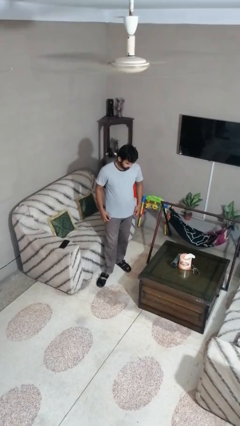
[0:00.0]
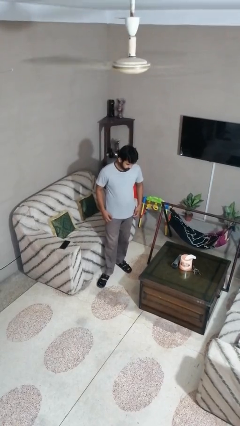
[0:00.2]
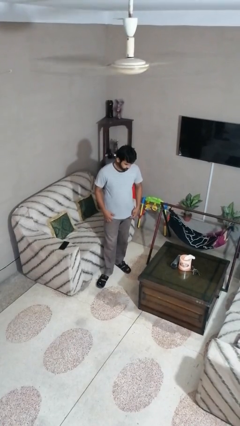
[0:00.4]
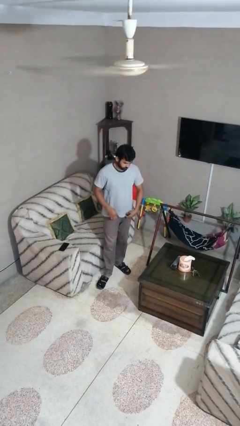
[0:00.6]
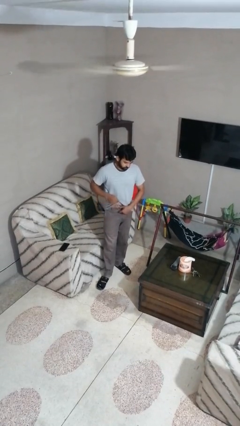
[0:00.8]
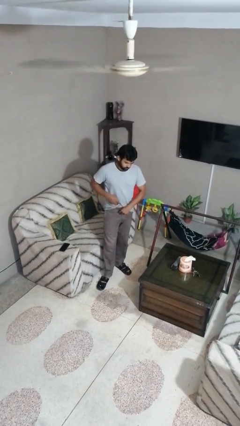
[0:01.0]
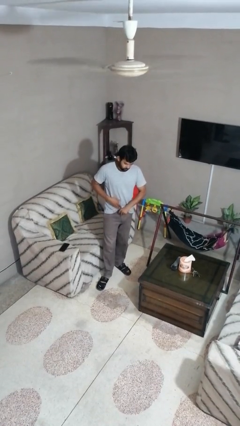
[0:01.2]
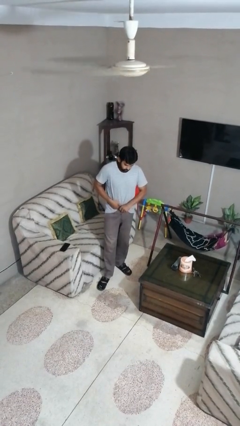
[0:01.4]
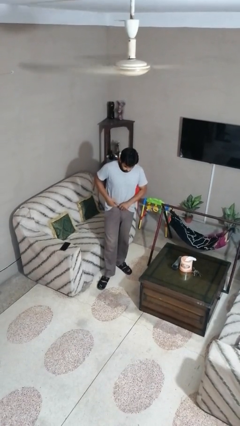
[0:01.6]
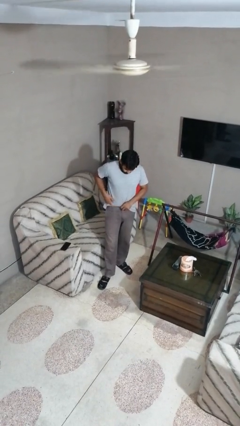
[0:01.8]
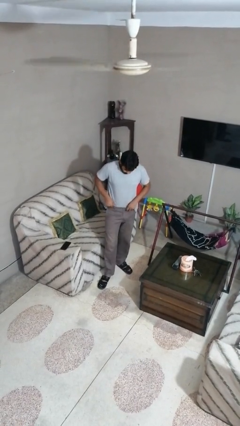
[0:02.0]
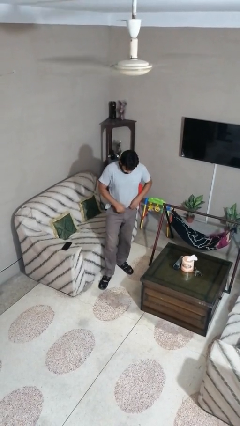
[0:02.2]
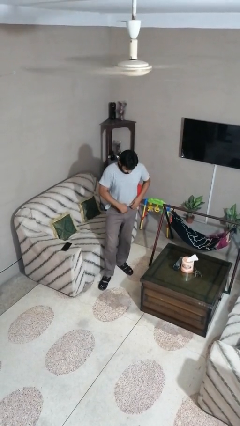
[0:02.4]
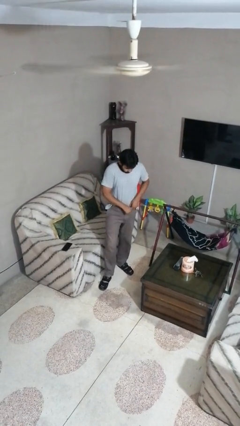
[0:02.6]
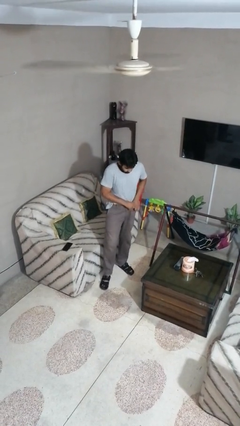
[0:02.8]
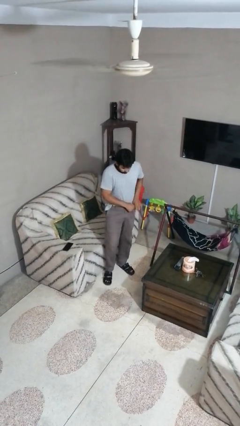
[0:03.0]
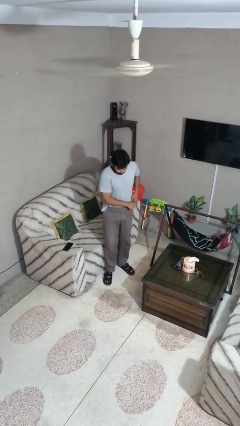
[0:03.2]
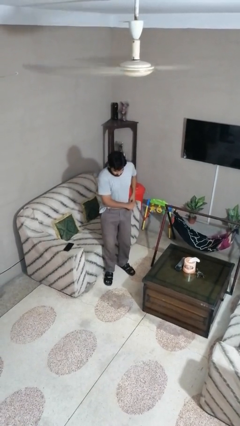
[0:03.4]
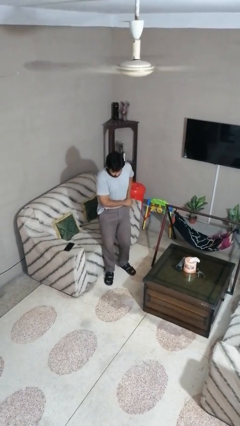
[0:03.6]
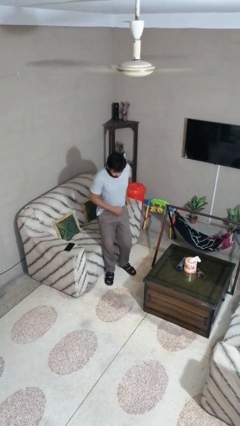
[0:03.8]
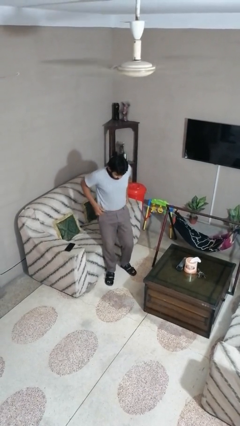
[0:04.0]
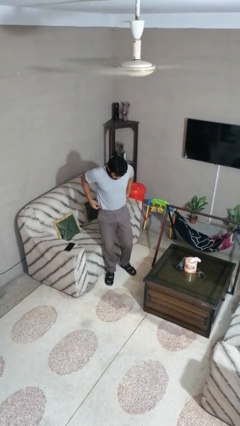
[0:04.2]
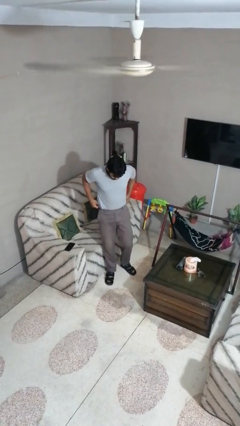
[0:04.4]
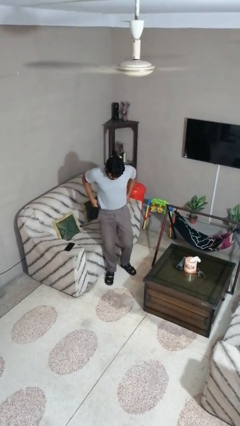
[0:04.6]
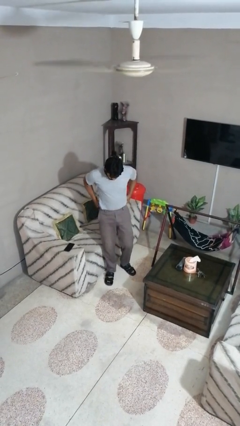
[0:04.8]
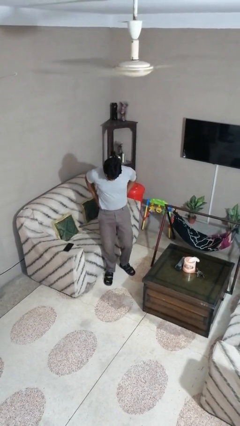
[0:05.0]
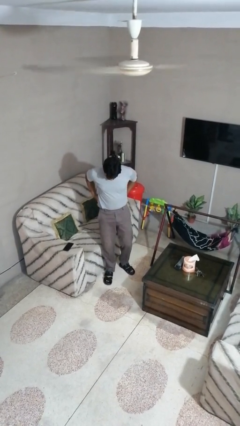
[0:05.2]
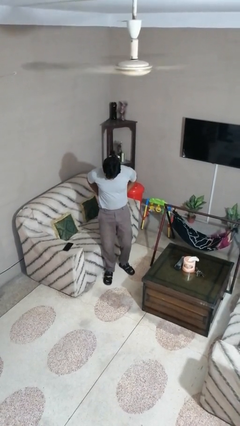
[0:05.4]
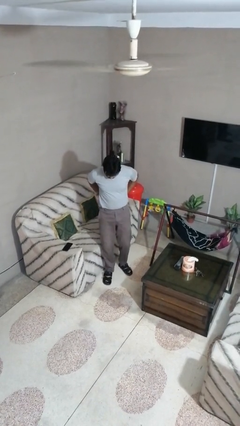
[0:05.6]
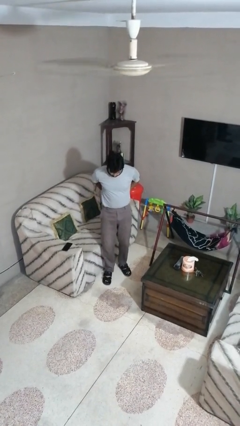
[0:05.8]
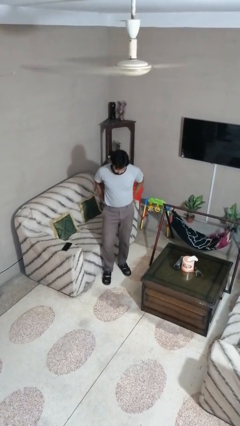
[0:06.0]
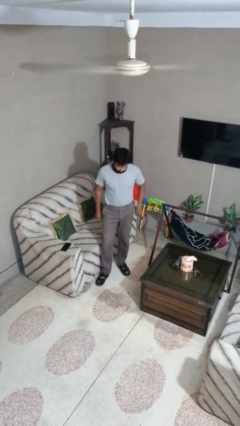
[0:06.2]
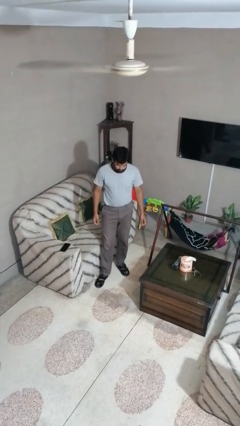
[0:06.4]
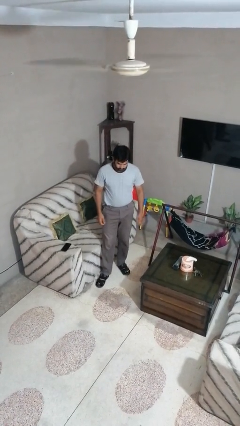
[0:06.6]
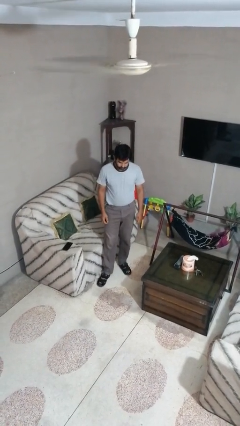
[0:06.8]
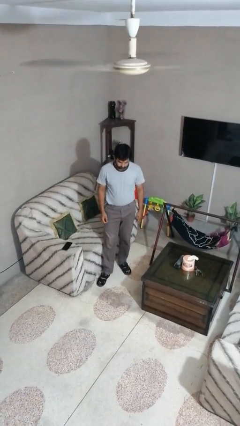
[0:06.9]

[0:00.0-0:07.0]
person tucks in shirt

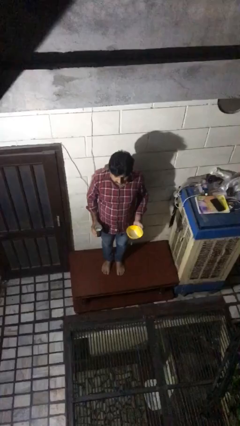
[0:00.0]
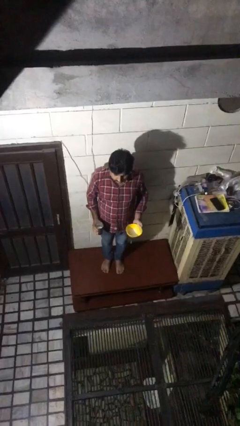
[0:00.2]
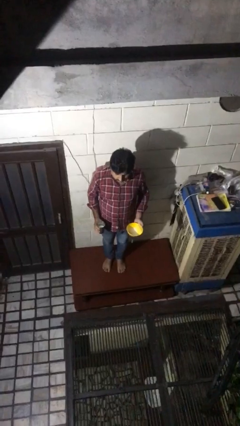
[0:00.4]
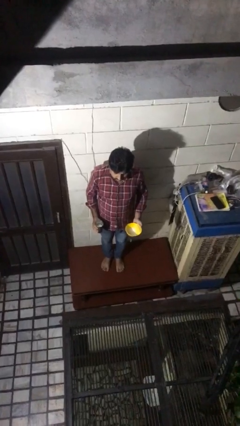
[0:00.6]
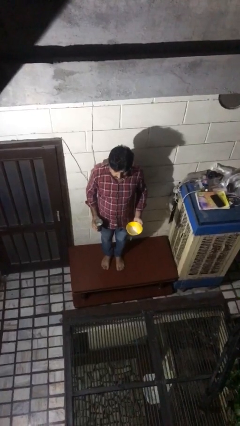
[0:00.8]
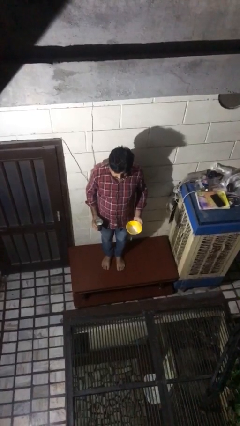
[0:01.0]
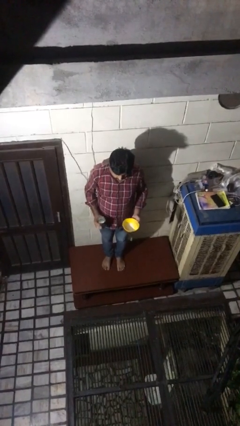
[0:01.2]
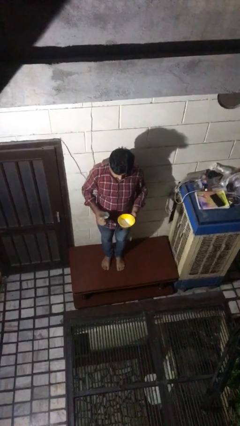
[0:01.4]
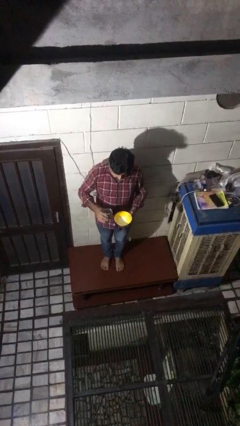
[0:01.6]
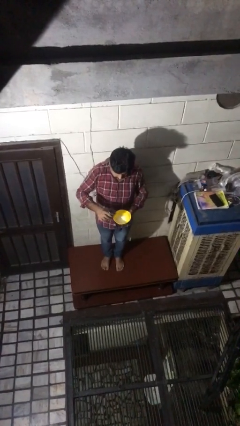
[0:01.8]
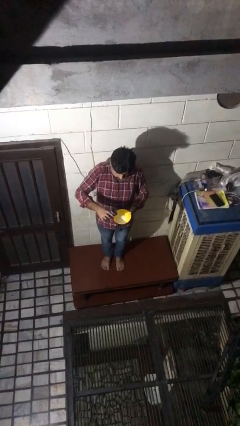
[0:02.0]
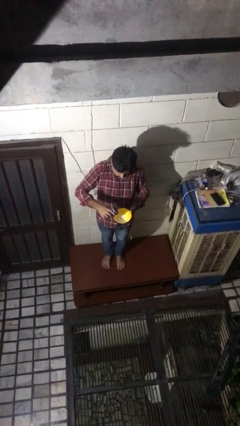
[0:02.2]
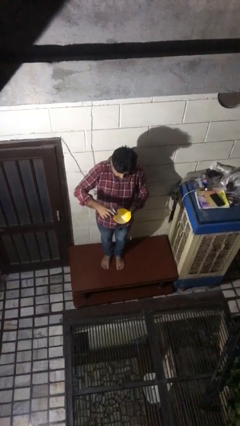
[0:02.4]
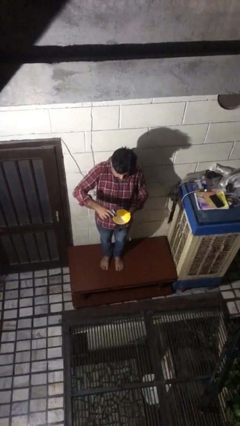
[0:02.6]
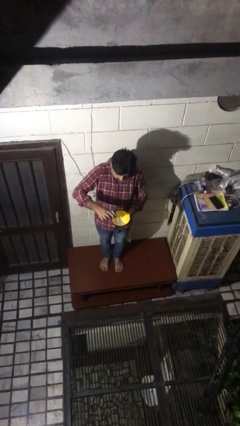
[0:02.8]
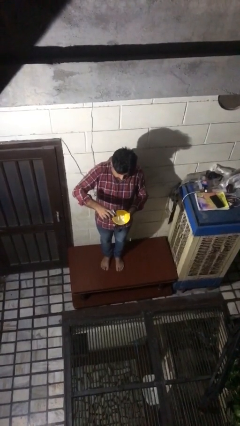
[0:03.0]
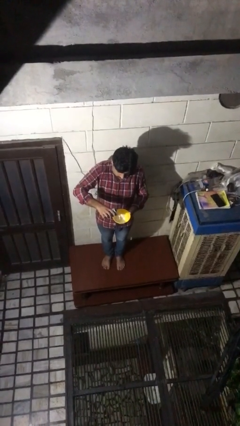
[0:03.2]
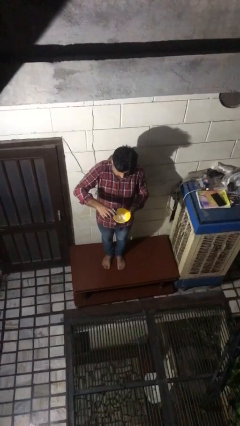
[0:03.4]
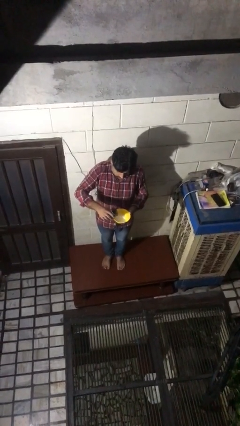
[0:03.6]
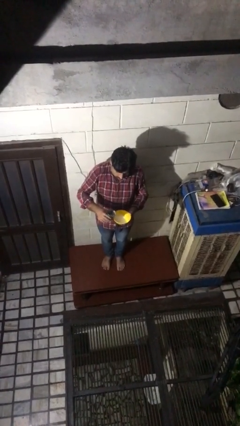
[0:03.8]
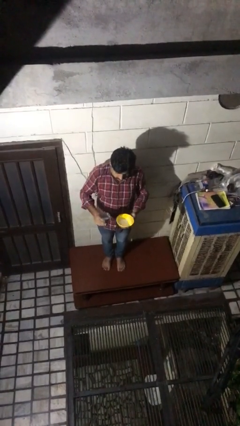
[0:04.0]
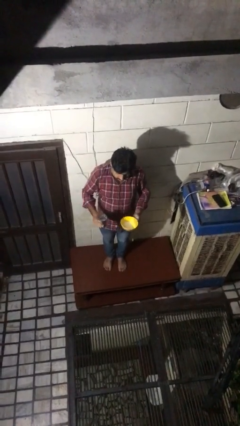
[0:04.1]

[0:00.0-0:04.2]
person pours into bowl

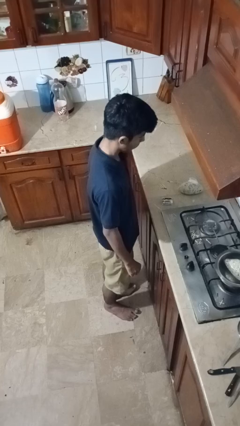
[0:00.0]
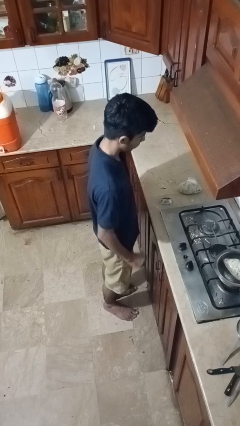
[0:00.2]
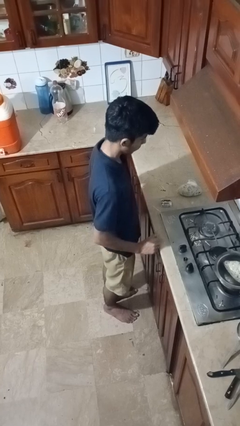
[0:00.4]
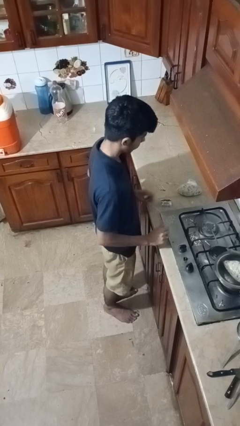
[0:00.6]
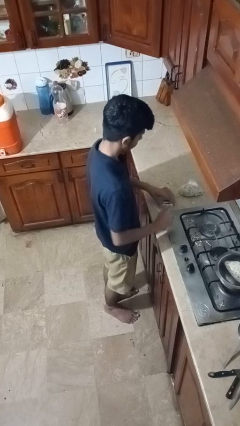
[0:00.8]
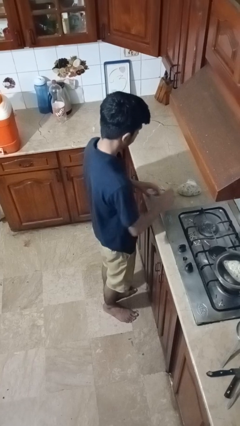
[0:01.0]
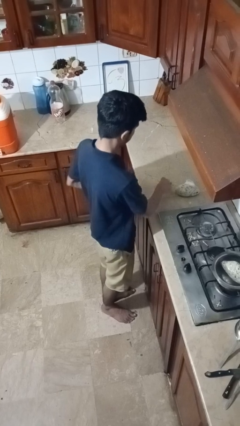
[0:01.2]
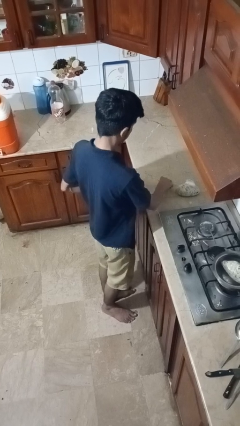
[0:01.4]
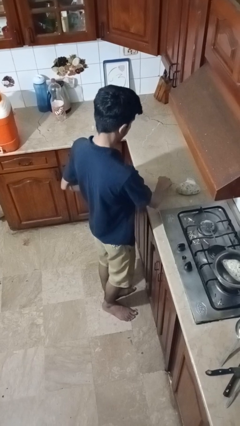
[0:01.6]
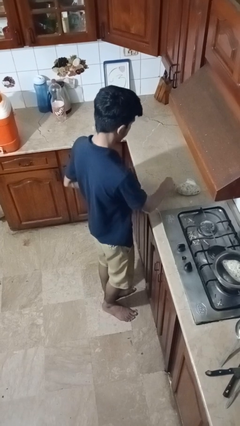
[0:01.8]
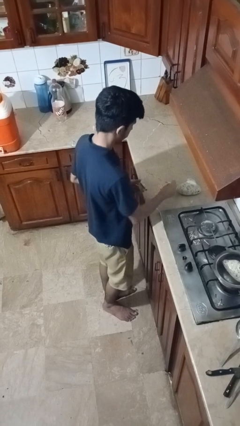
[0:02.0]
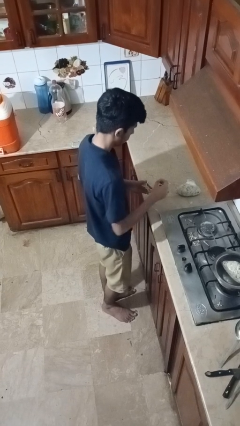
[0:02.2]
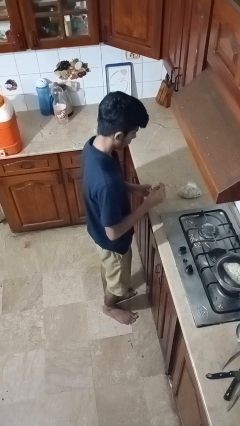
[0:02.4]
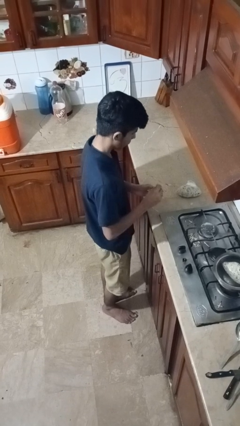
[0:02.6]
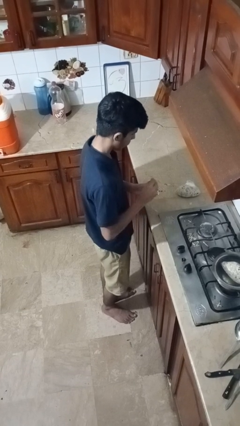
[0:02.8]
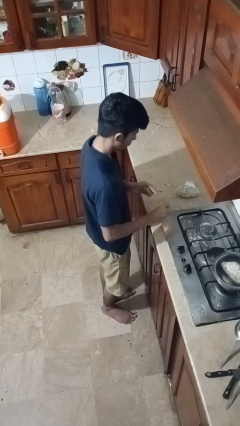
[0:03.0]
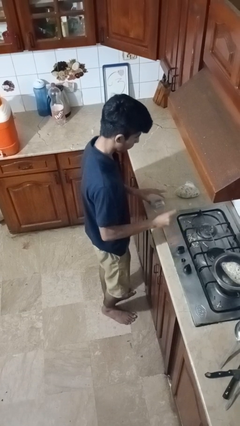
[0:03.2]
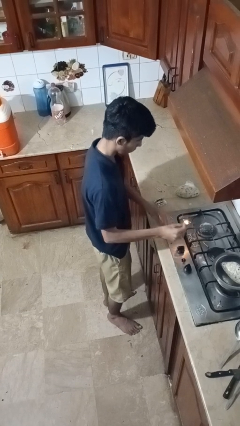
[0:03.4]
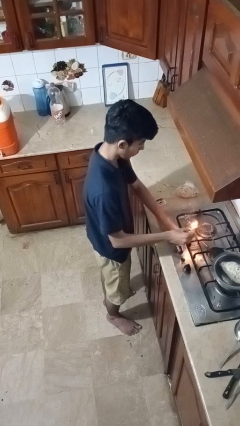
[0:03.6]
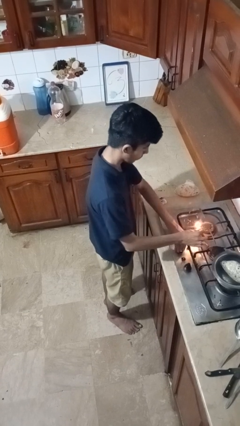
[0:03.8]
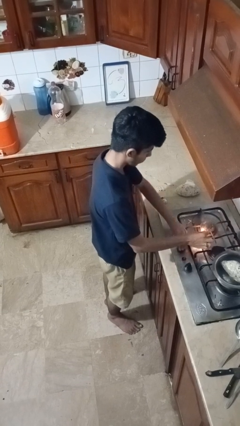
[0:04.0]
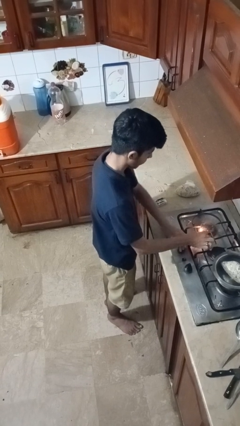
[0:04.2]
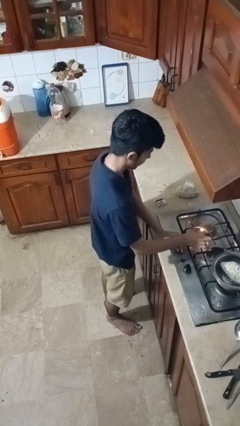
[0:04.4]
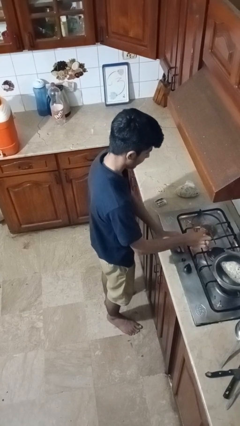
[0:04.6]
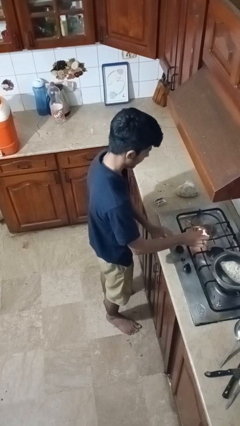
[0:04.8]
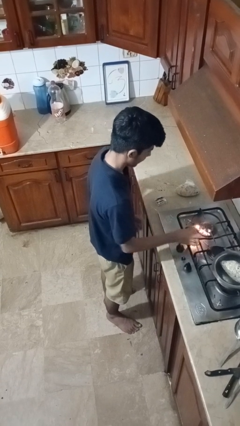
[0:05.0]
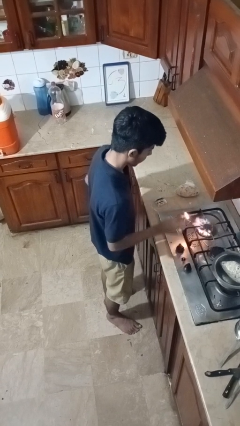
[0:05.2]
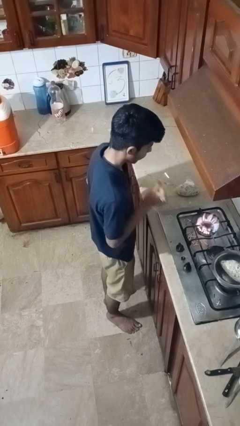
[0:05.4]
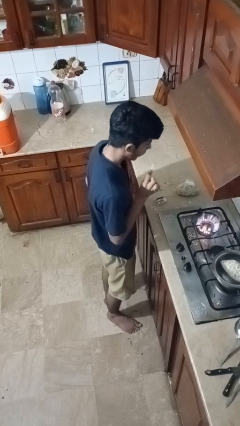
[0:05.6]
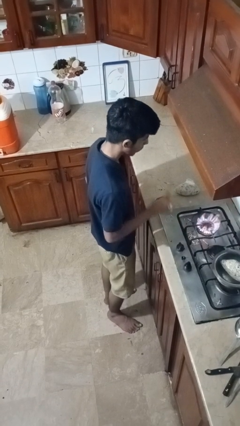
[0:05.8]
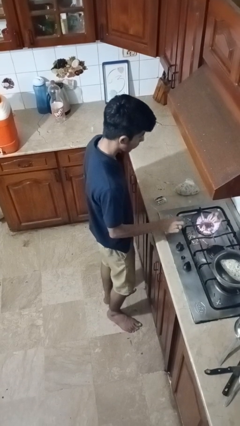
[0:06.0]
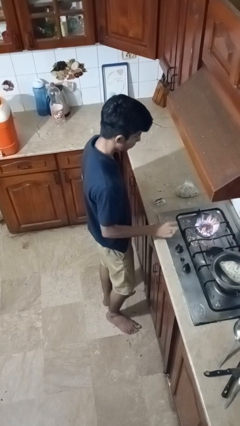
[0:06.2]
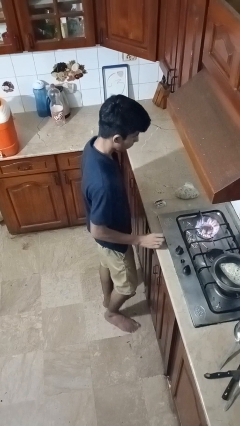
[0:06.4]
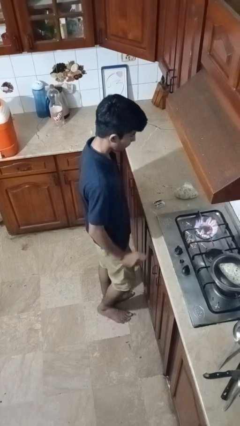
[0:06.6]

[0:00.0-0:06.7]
person turns on stovetop

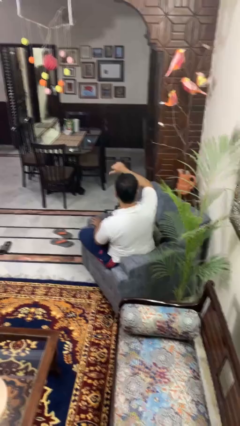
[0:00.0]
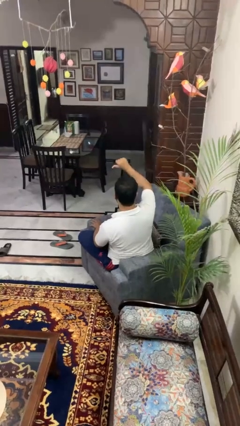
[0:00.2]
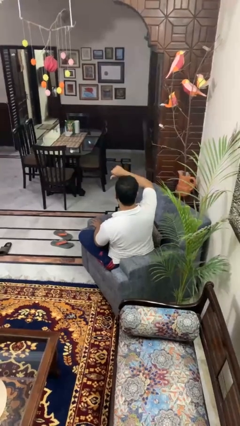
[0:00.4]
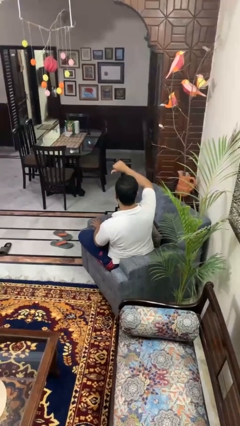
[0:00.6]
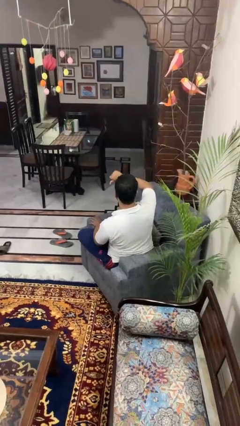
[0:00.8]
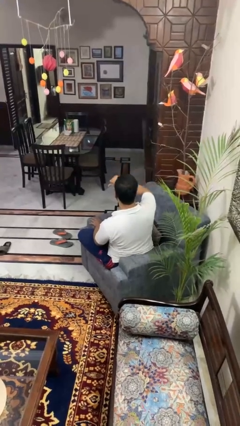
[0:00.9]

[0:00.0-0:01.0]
person gestures thumbs down
